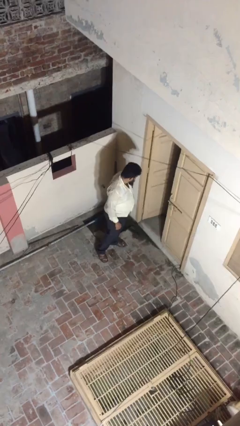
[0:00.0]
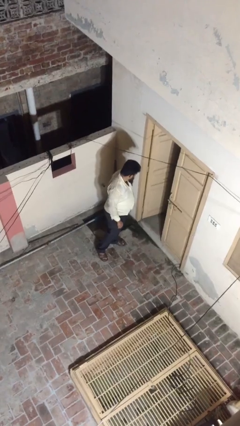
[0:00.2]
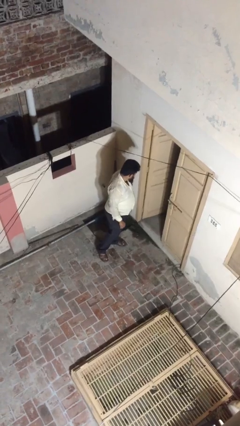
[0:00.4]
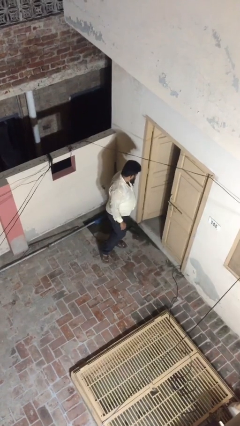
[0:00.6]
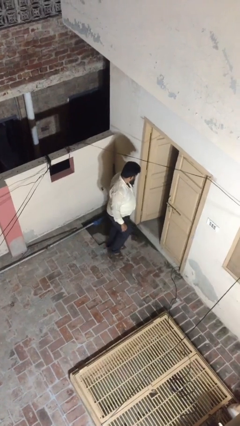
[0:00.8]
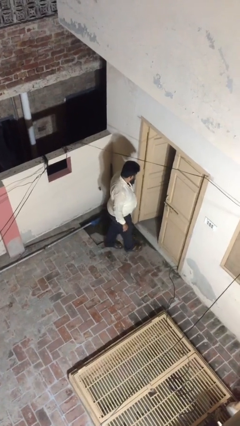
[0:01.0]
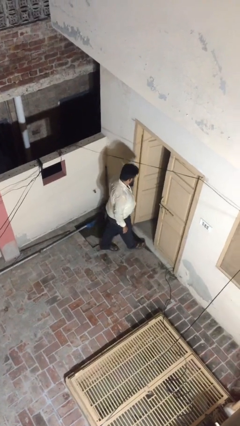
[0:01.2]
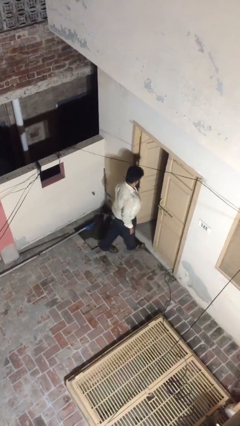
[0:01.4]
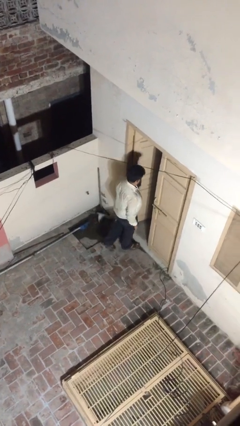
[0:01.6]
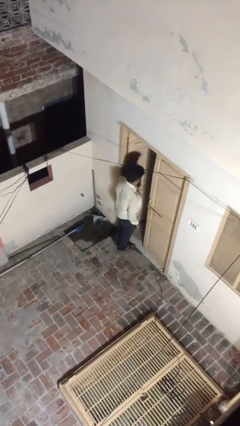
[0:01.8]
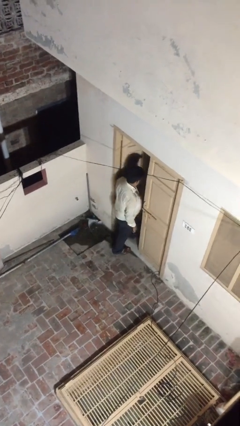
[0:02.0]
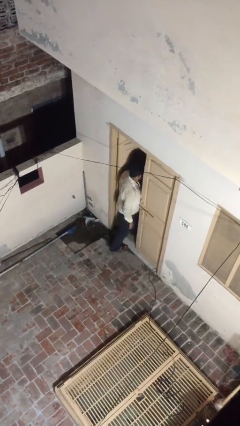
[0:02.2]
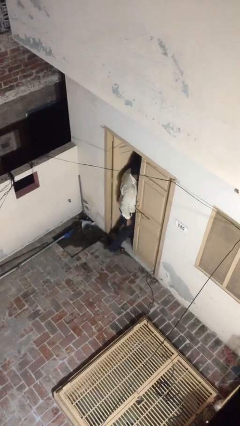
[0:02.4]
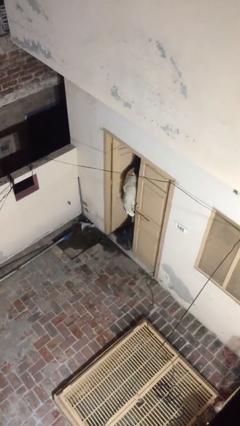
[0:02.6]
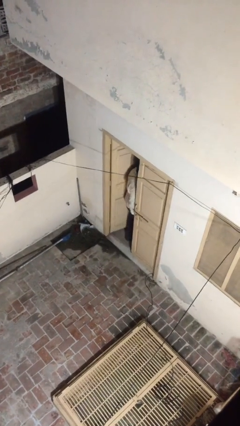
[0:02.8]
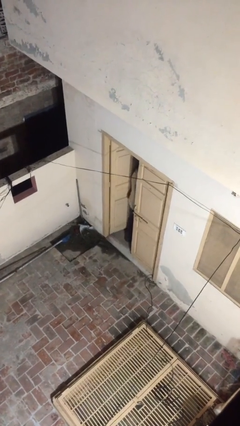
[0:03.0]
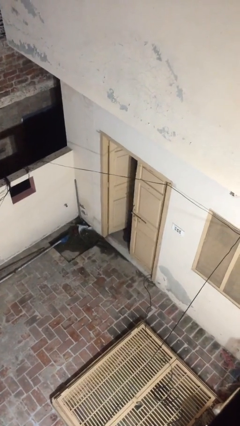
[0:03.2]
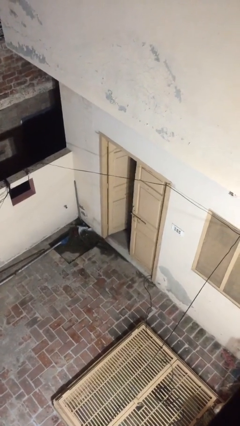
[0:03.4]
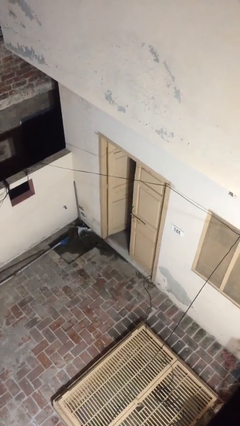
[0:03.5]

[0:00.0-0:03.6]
person exits scene through structure

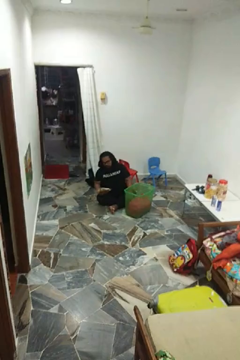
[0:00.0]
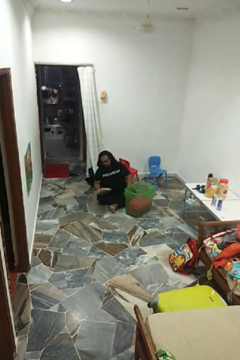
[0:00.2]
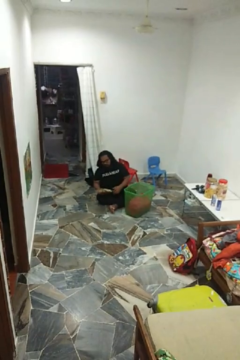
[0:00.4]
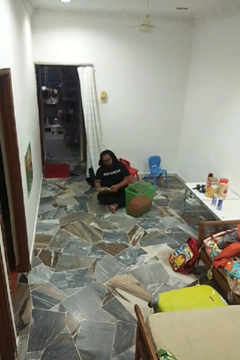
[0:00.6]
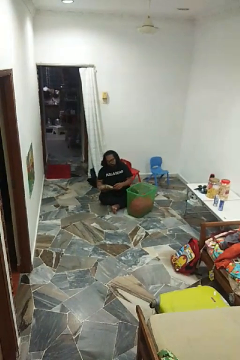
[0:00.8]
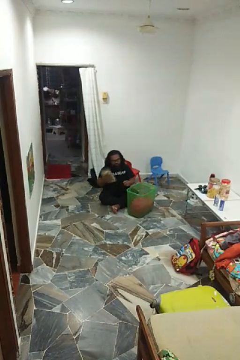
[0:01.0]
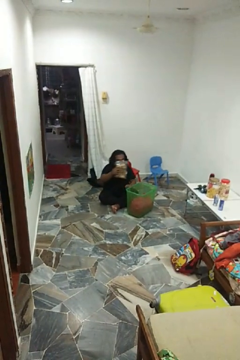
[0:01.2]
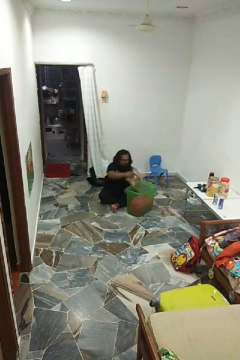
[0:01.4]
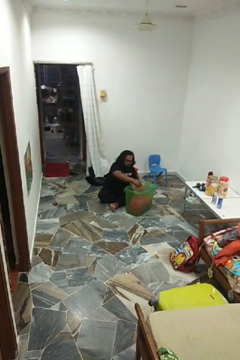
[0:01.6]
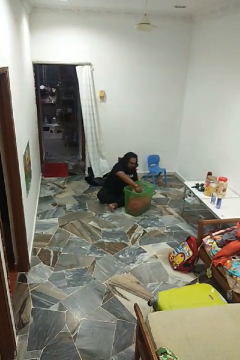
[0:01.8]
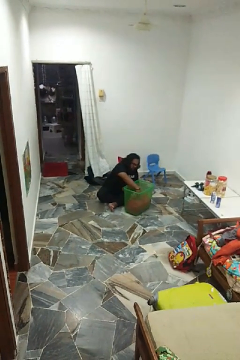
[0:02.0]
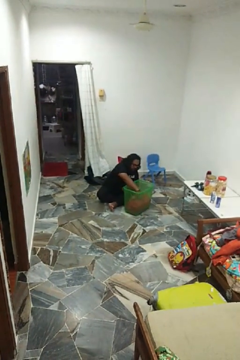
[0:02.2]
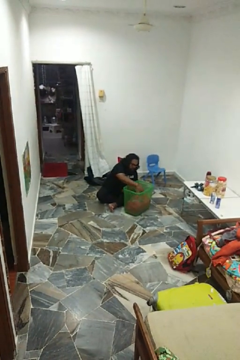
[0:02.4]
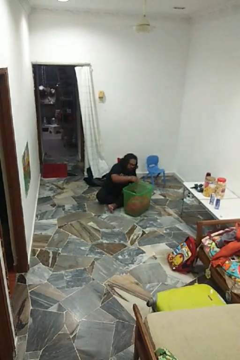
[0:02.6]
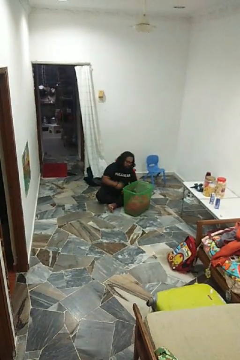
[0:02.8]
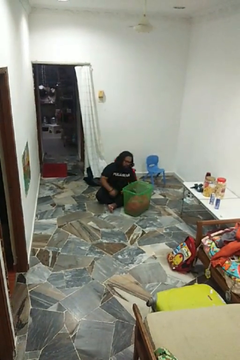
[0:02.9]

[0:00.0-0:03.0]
person puts object into basket

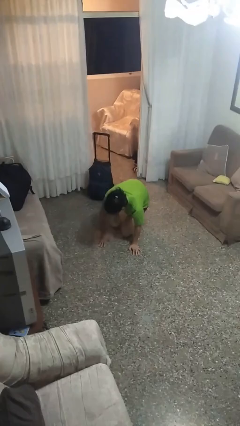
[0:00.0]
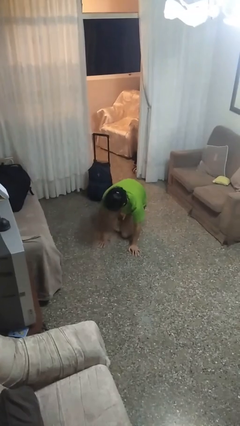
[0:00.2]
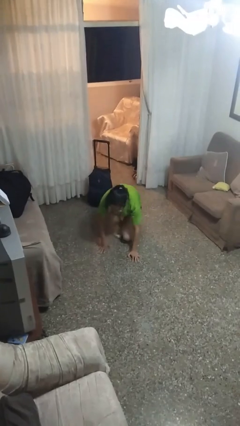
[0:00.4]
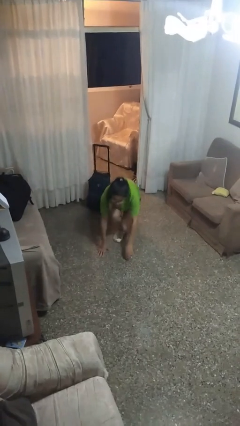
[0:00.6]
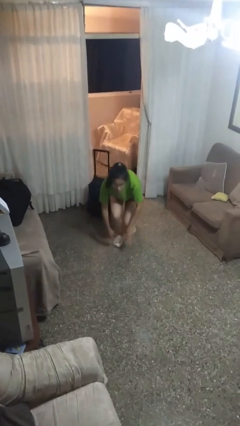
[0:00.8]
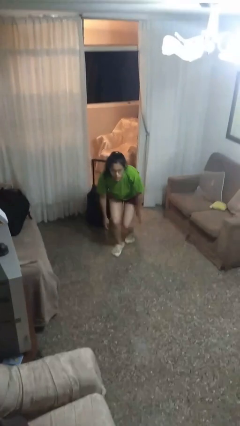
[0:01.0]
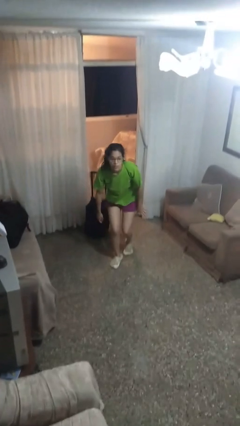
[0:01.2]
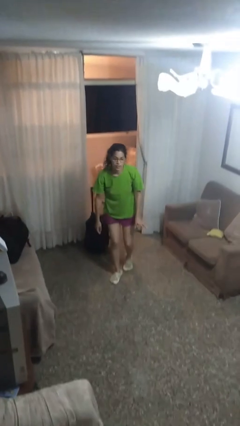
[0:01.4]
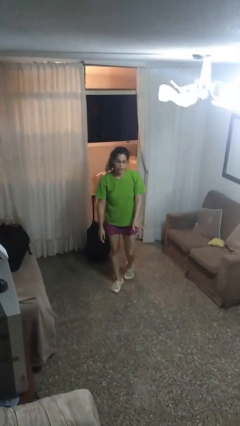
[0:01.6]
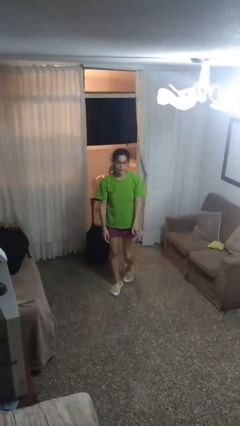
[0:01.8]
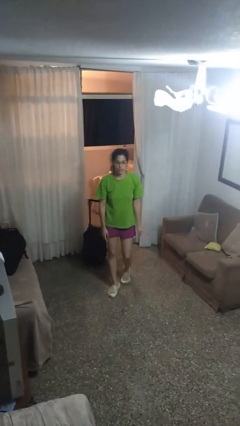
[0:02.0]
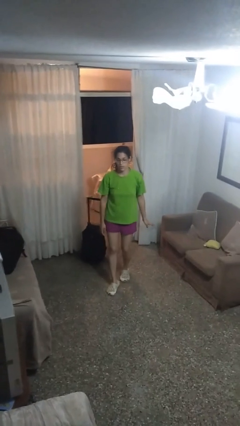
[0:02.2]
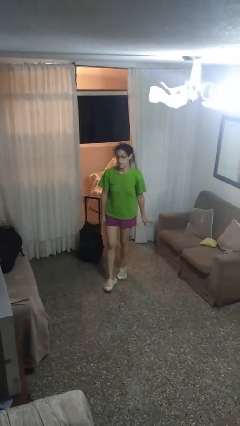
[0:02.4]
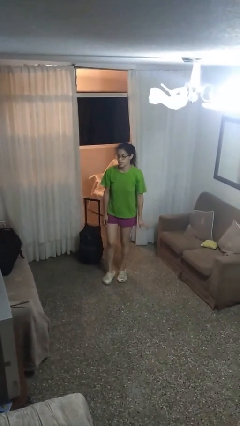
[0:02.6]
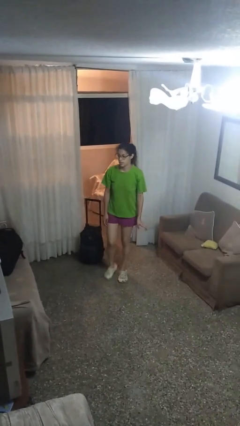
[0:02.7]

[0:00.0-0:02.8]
person stands up from floor

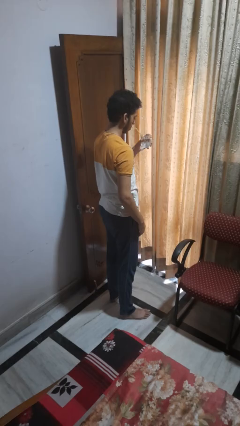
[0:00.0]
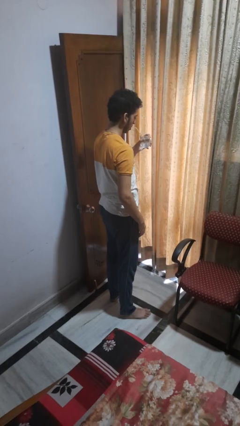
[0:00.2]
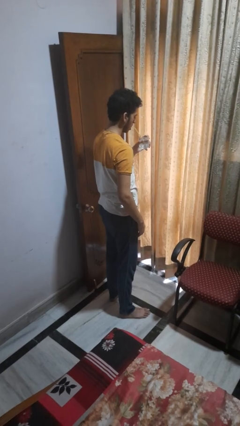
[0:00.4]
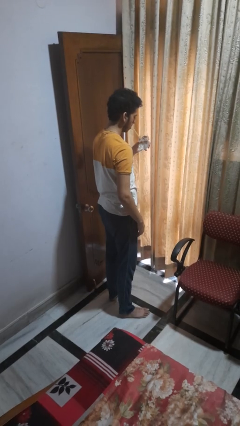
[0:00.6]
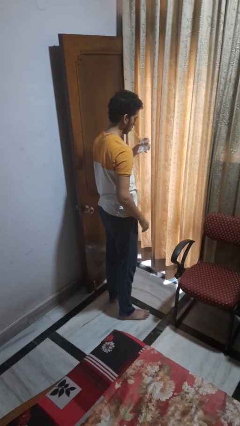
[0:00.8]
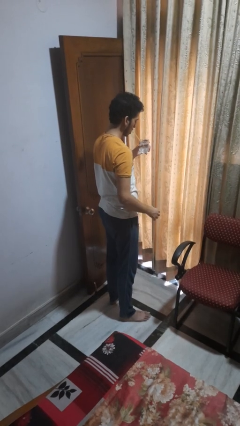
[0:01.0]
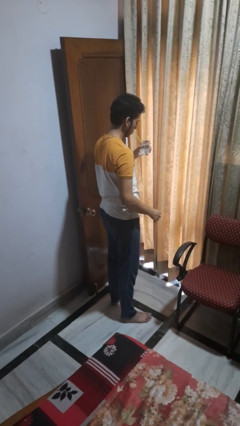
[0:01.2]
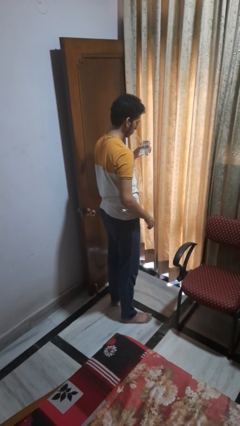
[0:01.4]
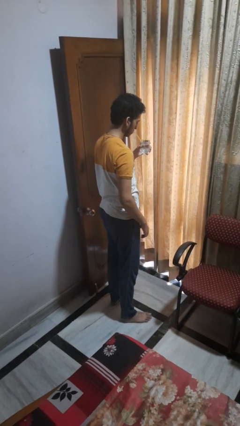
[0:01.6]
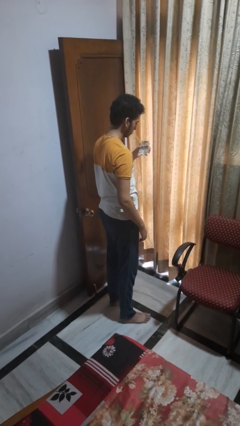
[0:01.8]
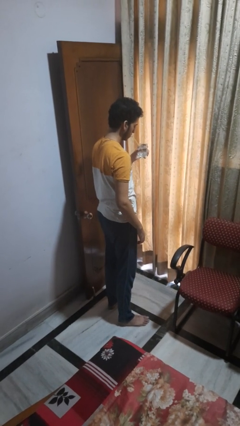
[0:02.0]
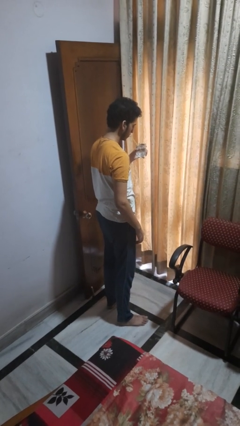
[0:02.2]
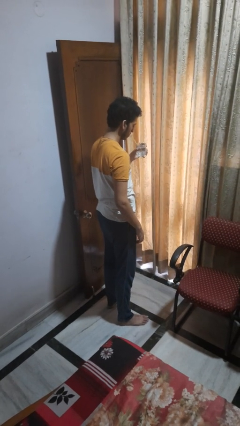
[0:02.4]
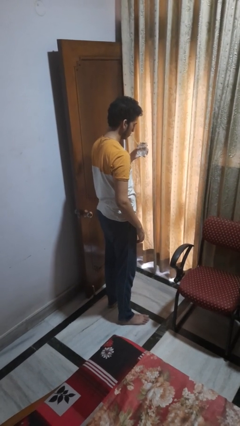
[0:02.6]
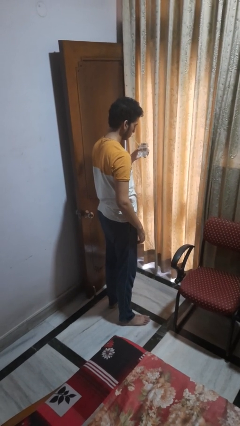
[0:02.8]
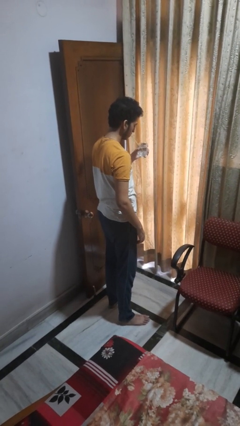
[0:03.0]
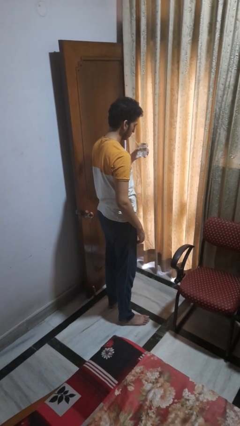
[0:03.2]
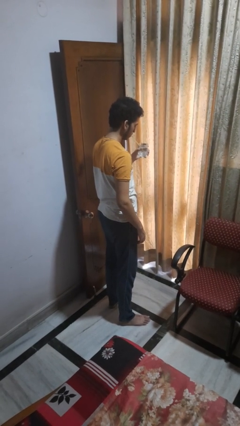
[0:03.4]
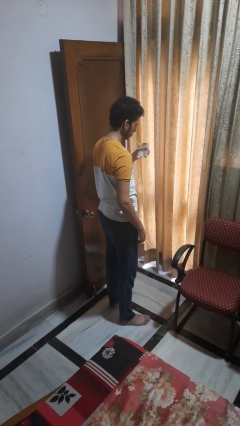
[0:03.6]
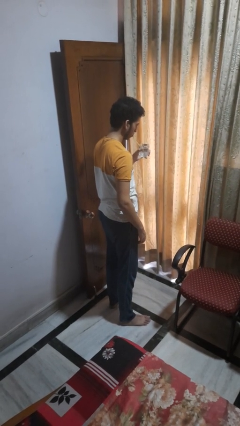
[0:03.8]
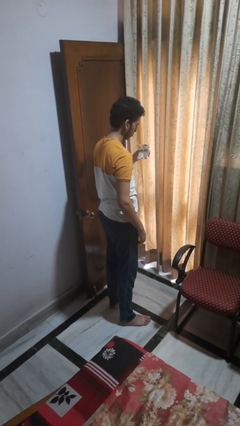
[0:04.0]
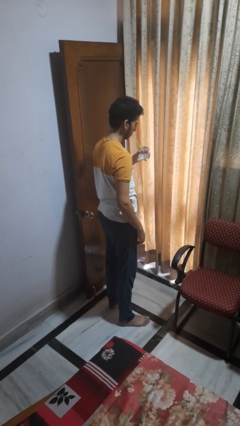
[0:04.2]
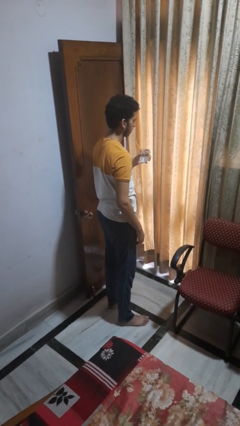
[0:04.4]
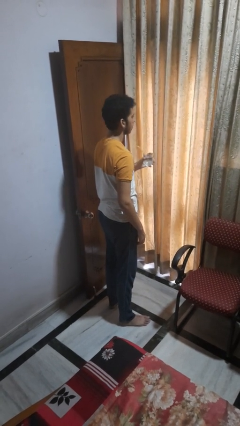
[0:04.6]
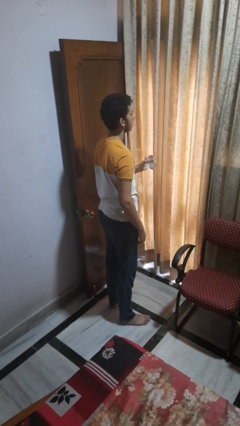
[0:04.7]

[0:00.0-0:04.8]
person drinks from straw

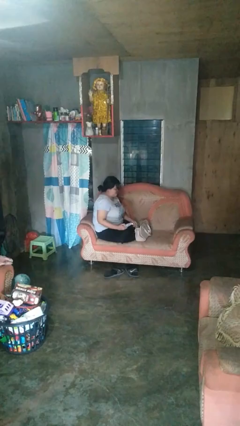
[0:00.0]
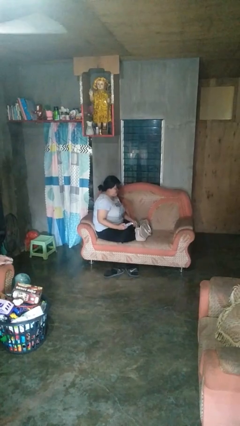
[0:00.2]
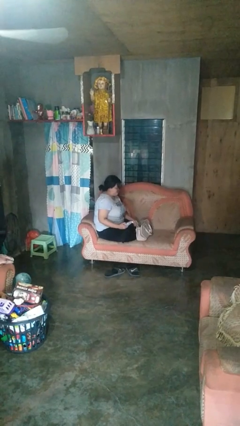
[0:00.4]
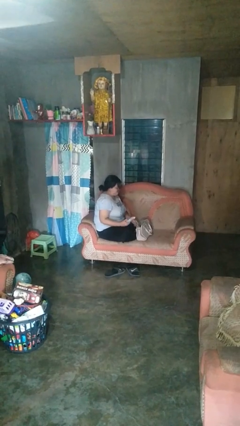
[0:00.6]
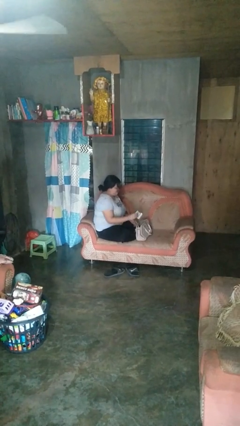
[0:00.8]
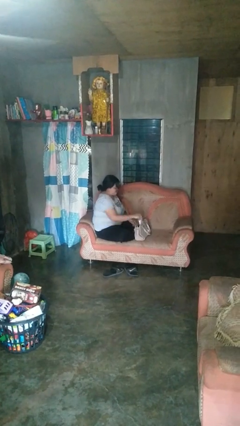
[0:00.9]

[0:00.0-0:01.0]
person puts object into purse

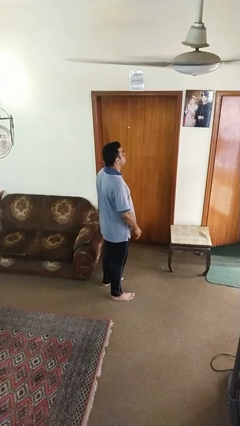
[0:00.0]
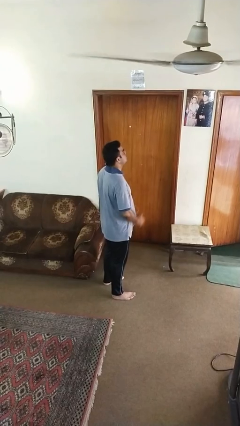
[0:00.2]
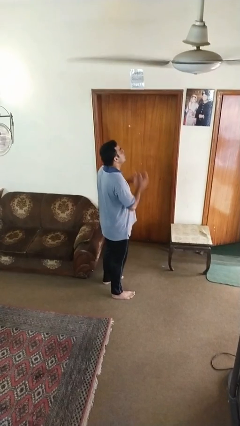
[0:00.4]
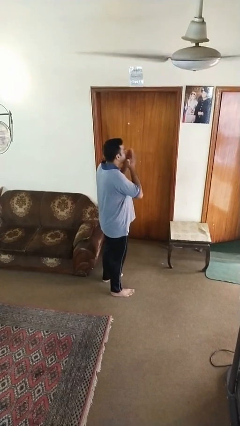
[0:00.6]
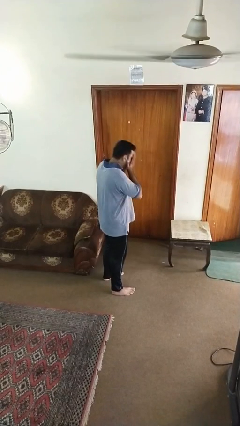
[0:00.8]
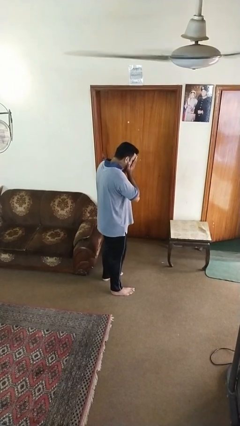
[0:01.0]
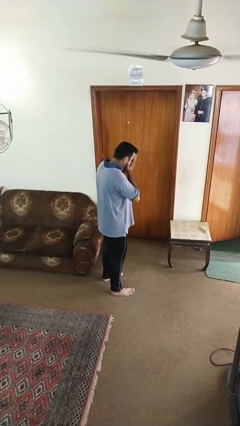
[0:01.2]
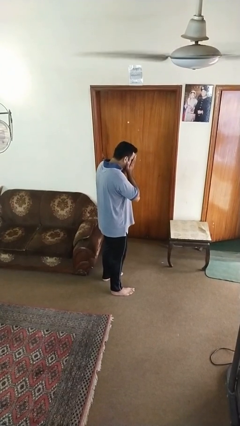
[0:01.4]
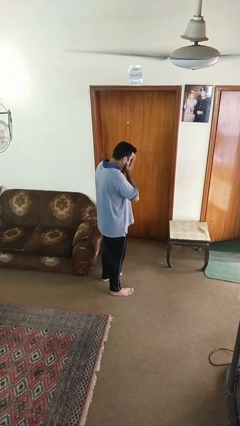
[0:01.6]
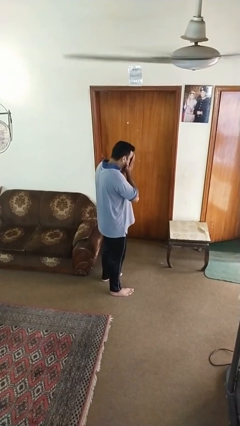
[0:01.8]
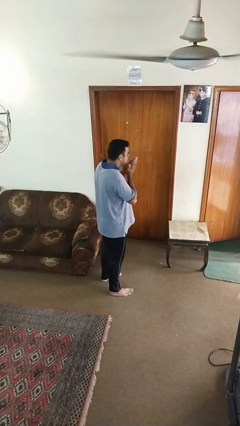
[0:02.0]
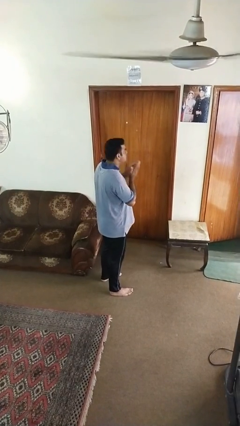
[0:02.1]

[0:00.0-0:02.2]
person sneezes into hand

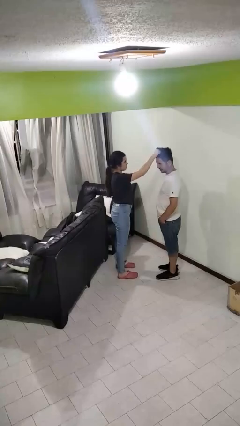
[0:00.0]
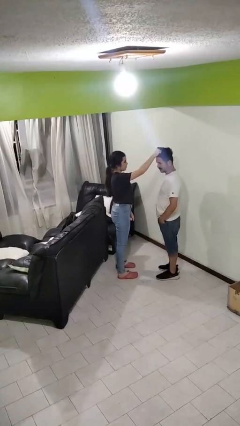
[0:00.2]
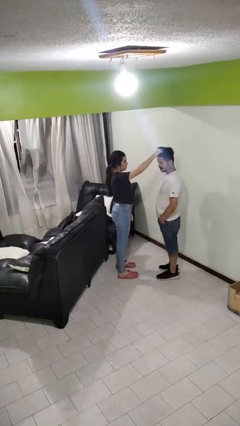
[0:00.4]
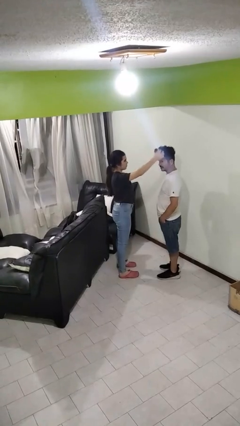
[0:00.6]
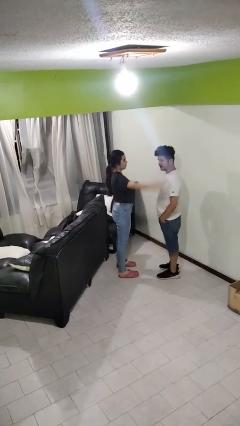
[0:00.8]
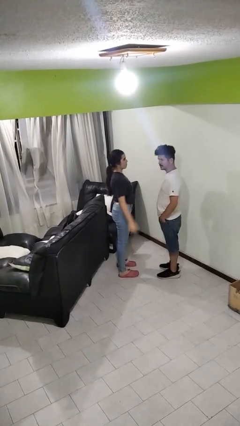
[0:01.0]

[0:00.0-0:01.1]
person grabs person by hair
